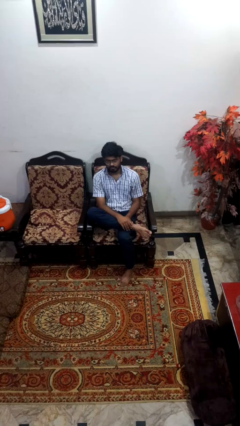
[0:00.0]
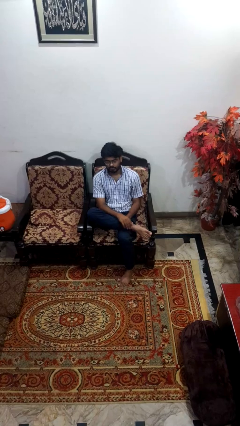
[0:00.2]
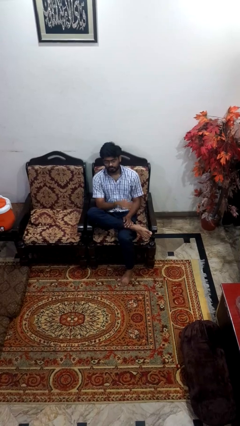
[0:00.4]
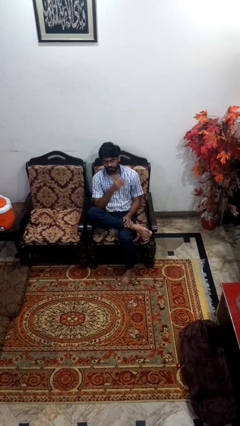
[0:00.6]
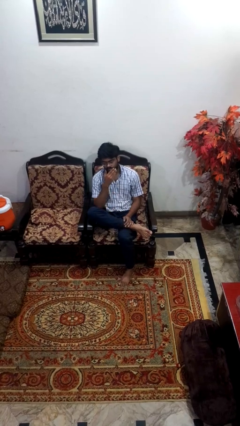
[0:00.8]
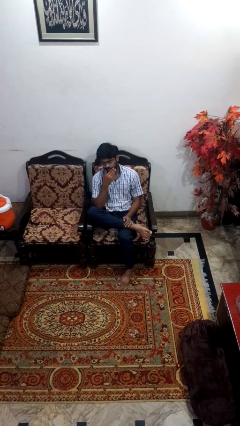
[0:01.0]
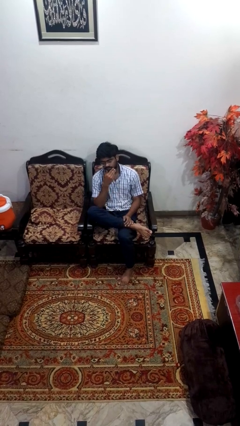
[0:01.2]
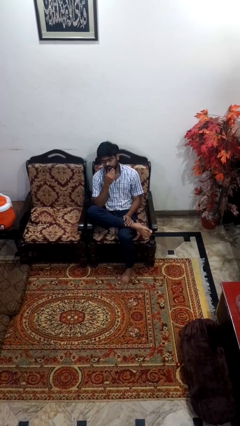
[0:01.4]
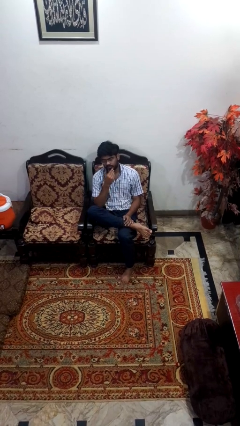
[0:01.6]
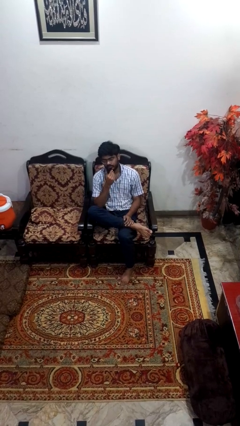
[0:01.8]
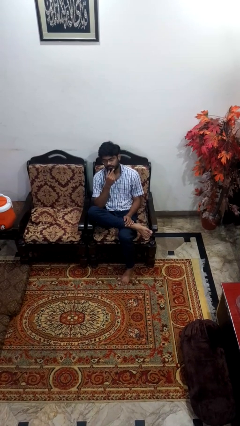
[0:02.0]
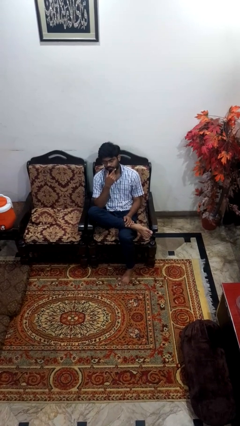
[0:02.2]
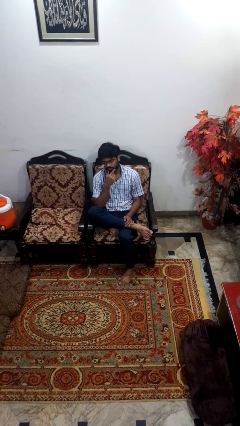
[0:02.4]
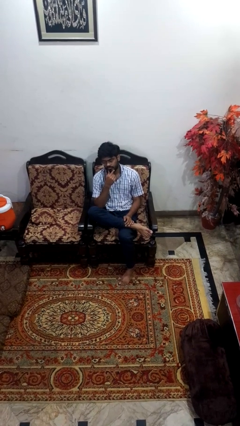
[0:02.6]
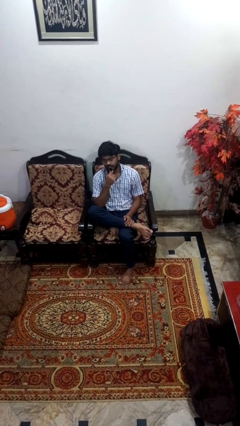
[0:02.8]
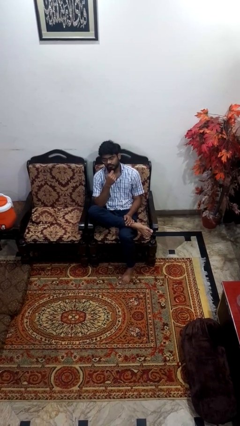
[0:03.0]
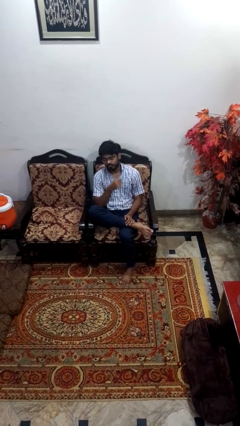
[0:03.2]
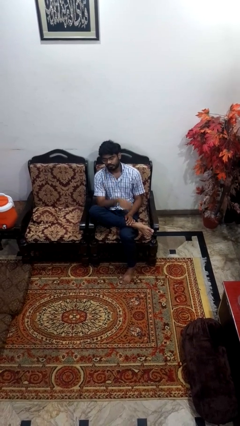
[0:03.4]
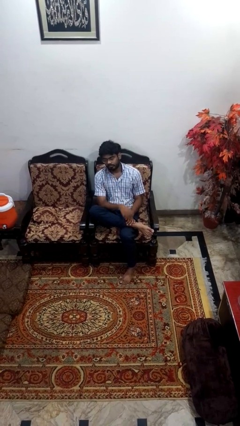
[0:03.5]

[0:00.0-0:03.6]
person strokes chin

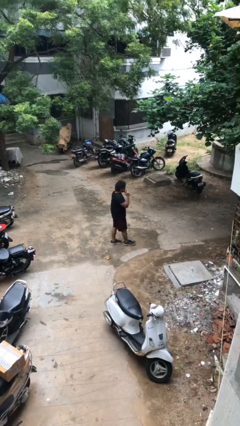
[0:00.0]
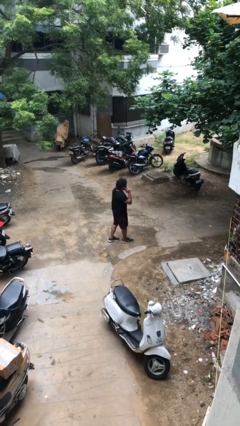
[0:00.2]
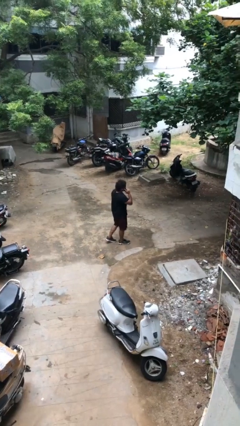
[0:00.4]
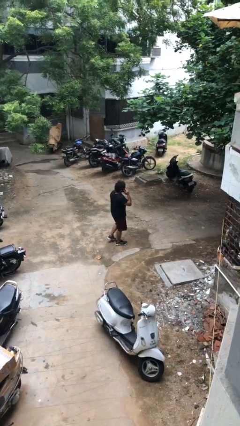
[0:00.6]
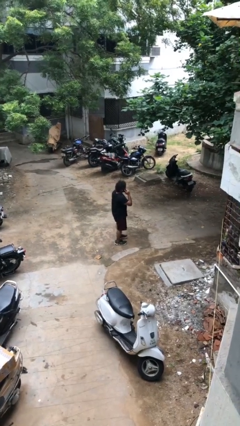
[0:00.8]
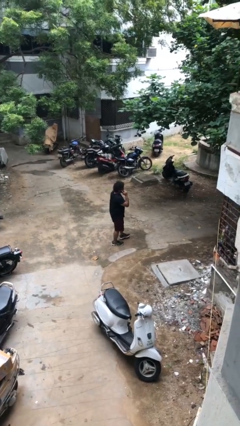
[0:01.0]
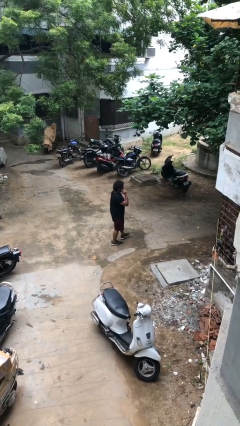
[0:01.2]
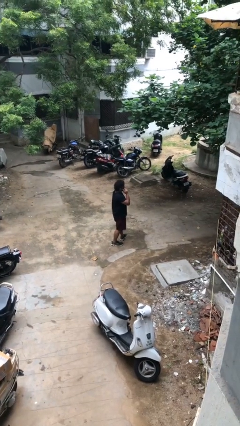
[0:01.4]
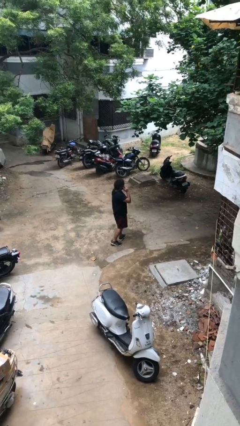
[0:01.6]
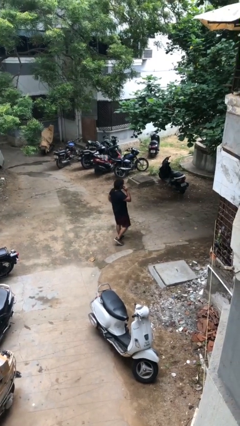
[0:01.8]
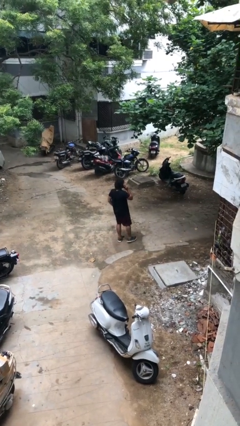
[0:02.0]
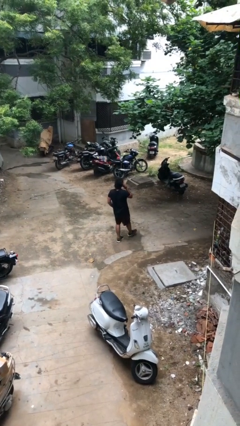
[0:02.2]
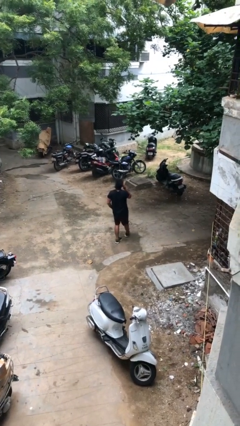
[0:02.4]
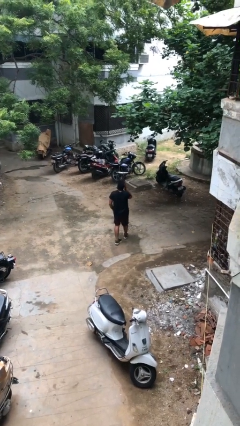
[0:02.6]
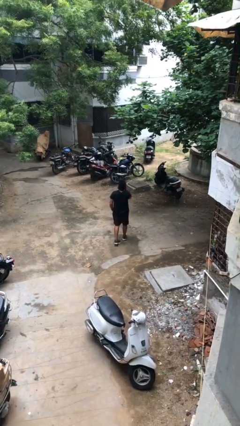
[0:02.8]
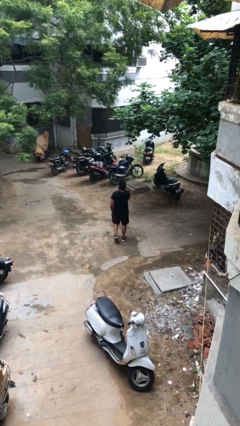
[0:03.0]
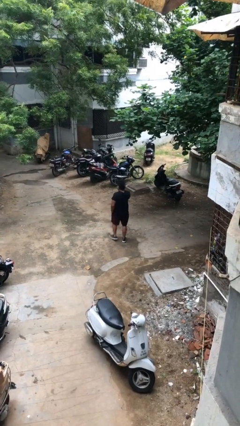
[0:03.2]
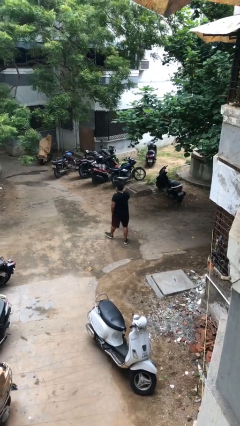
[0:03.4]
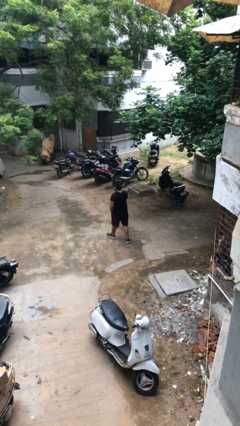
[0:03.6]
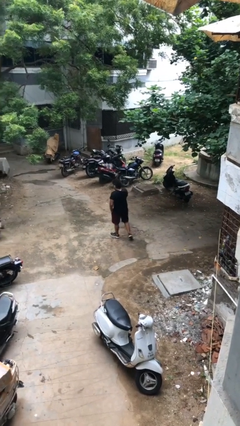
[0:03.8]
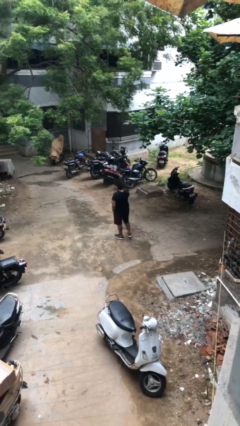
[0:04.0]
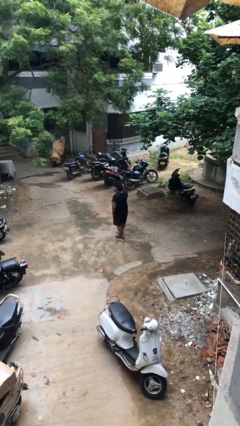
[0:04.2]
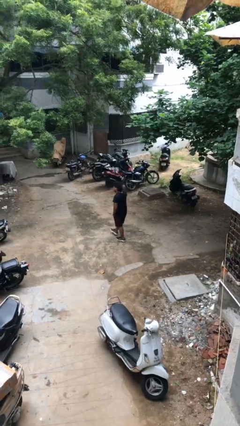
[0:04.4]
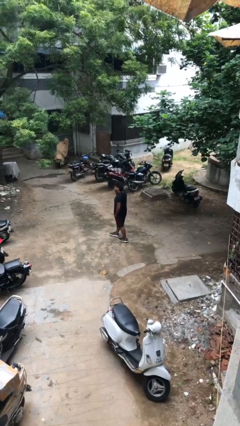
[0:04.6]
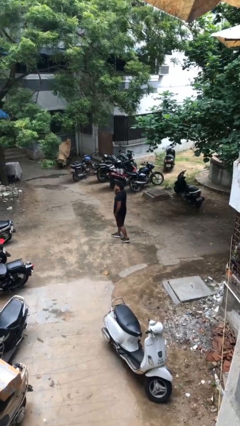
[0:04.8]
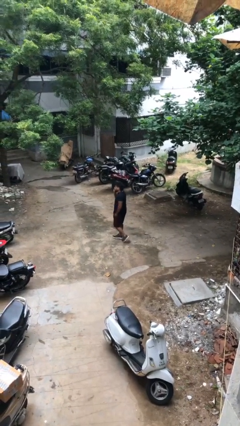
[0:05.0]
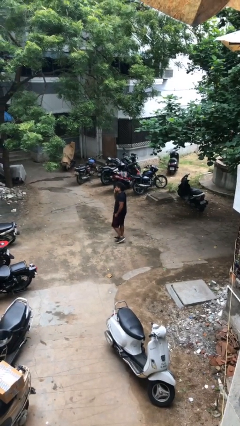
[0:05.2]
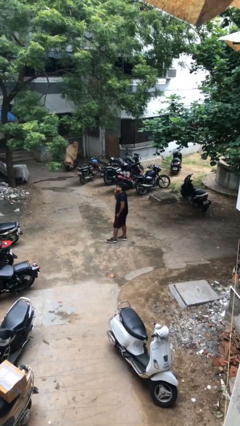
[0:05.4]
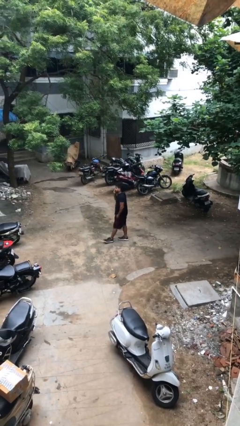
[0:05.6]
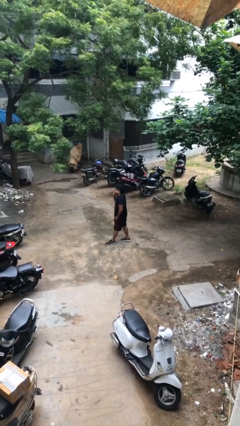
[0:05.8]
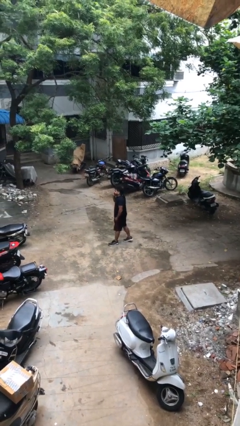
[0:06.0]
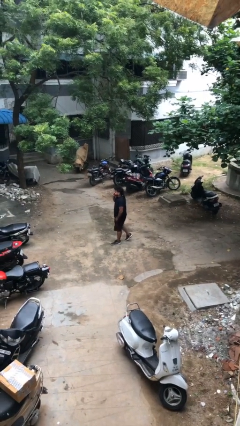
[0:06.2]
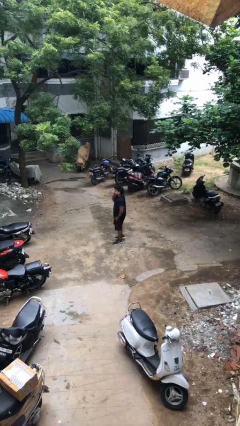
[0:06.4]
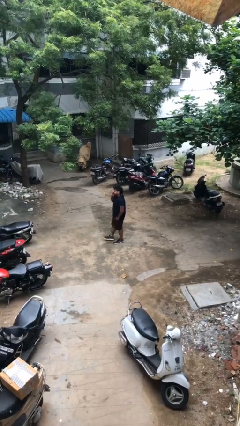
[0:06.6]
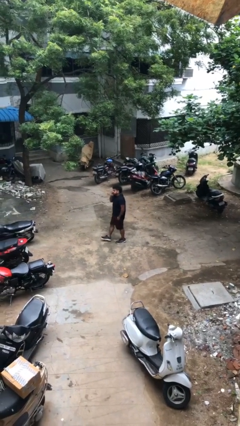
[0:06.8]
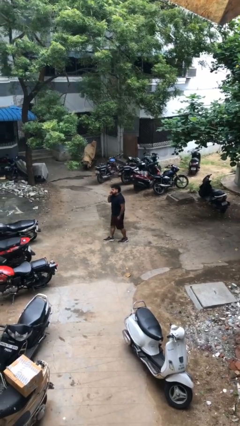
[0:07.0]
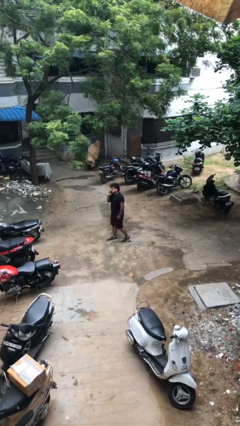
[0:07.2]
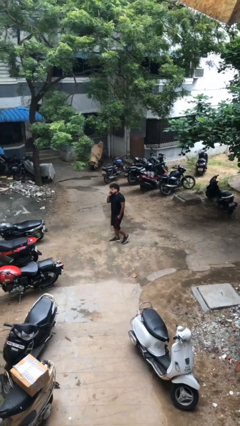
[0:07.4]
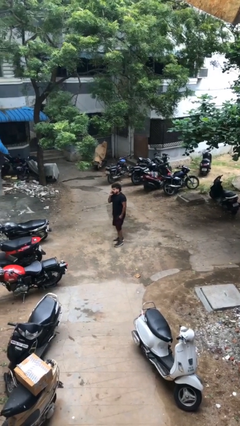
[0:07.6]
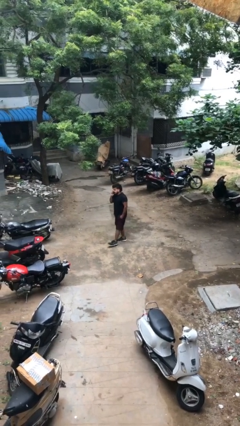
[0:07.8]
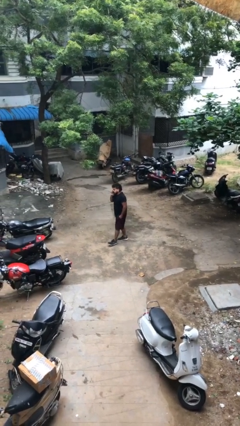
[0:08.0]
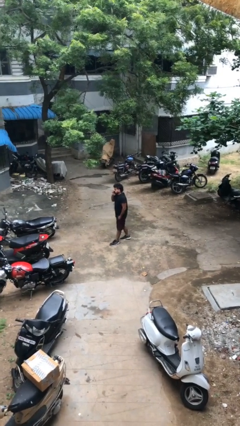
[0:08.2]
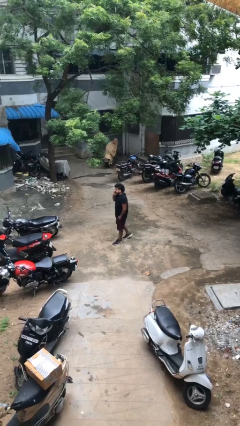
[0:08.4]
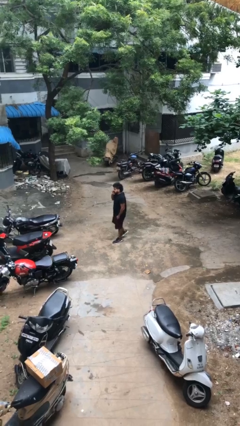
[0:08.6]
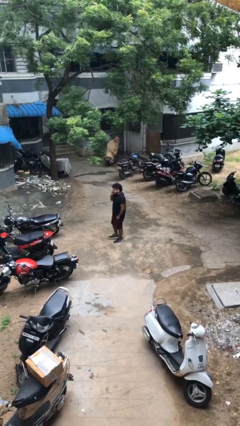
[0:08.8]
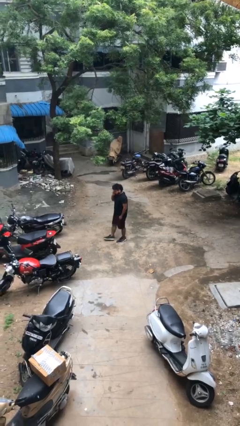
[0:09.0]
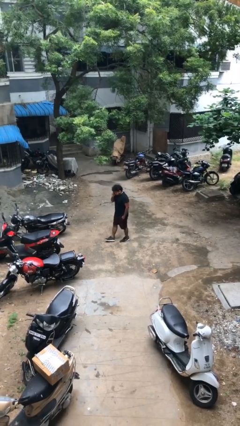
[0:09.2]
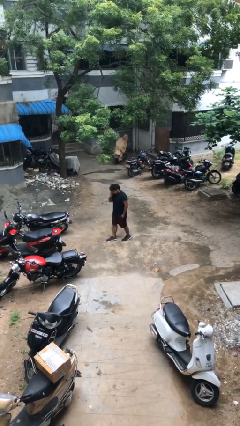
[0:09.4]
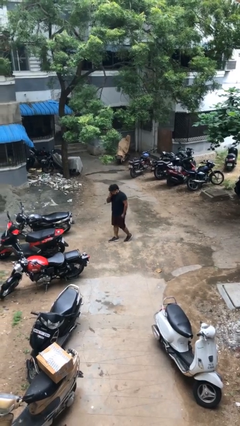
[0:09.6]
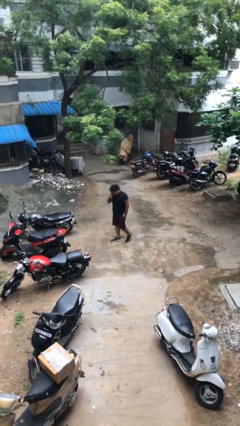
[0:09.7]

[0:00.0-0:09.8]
person talks on phone

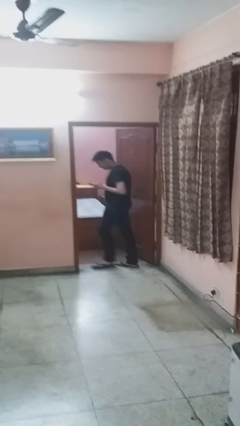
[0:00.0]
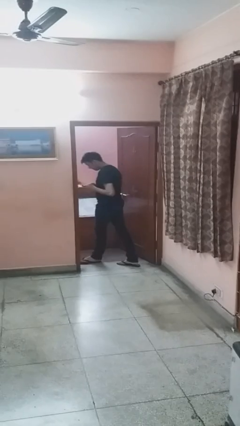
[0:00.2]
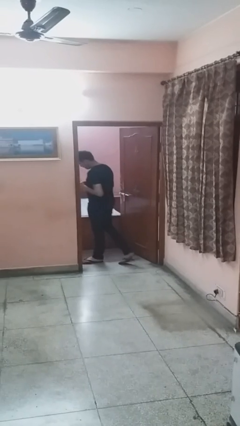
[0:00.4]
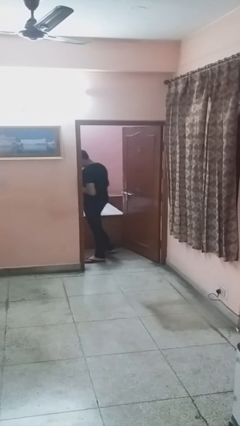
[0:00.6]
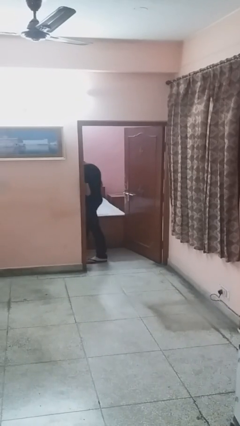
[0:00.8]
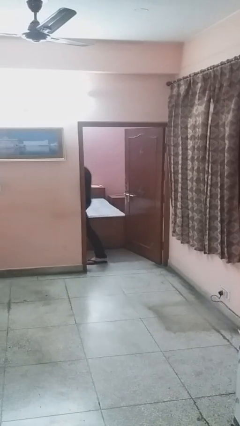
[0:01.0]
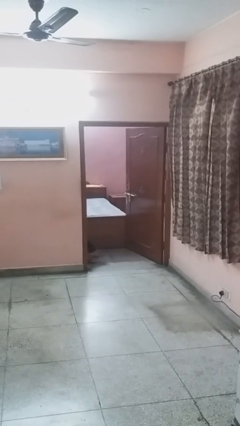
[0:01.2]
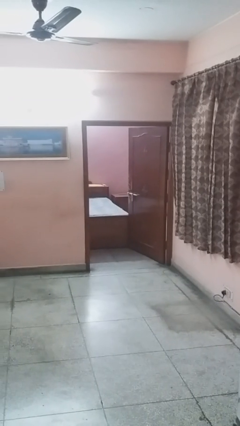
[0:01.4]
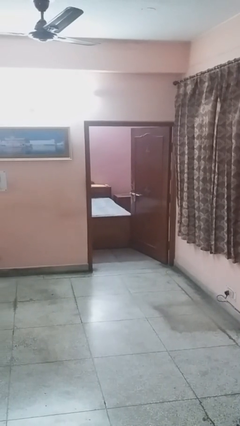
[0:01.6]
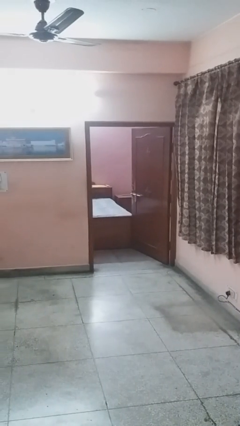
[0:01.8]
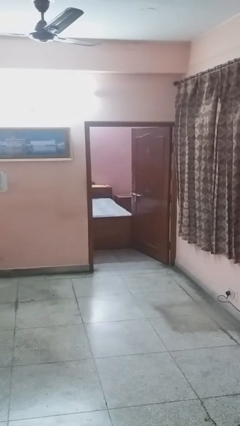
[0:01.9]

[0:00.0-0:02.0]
person exits scene through structure

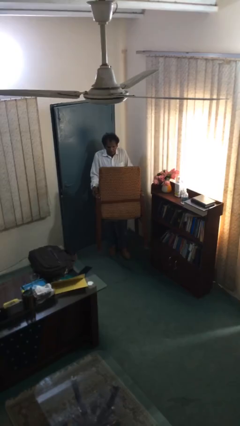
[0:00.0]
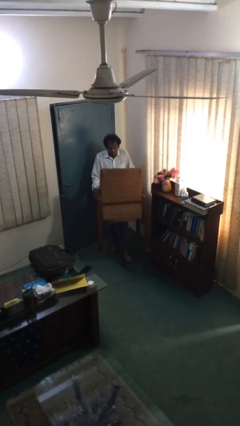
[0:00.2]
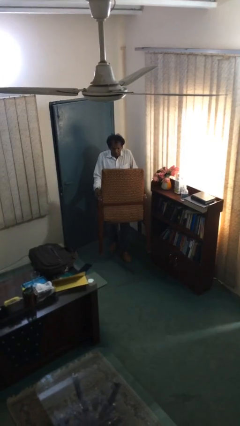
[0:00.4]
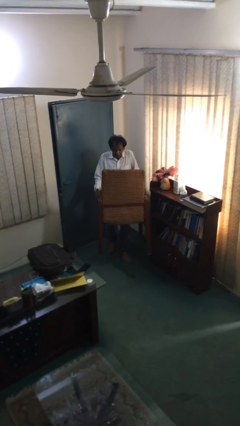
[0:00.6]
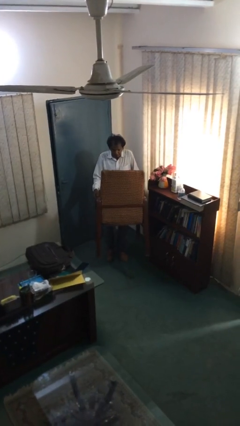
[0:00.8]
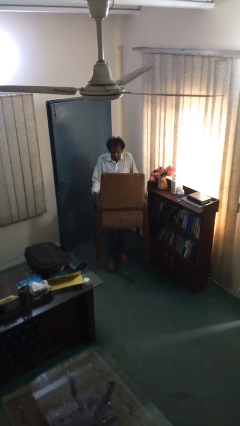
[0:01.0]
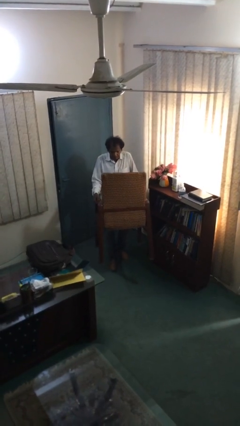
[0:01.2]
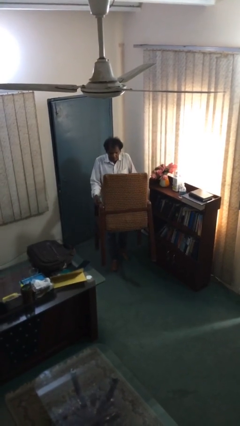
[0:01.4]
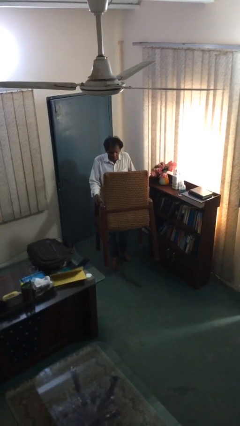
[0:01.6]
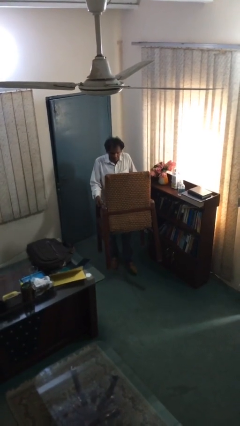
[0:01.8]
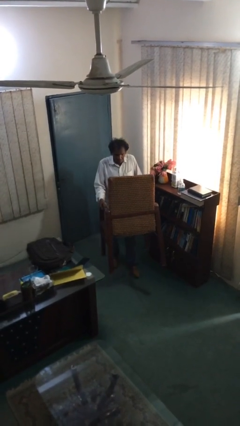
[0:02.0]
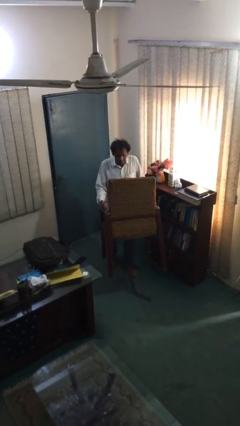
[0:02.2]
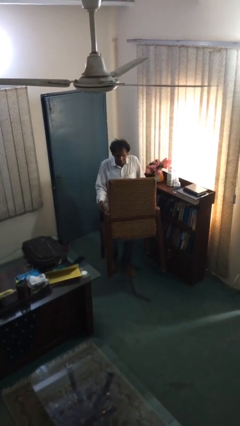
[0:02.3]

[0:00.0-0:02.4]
person carries heavy object
